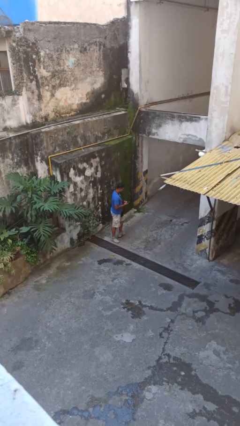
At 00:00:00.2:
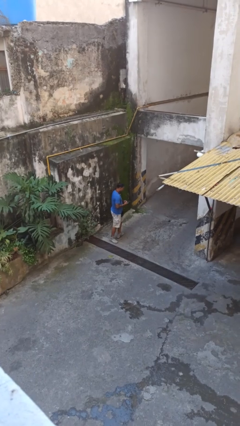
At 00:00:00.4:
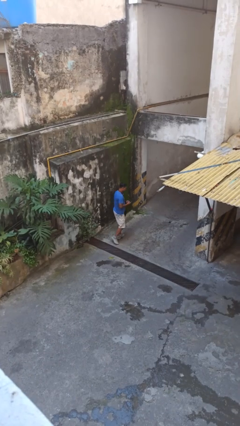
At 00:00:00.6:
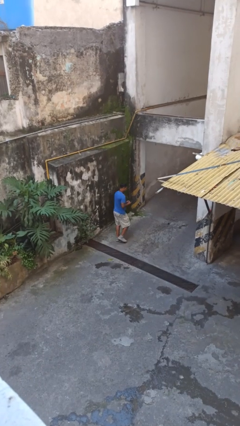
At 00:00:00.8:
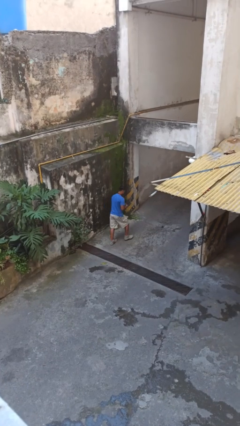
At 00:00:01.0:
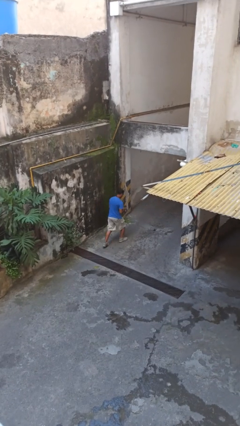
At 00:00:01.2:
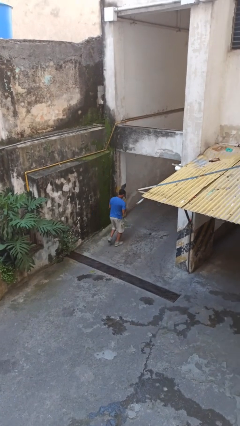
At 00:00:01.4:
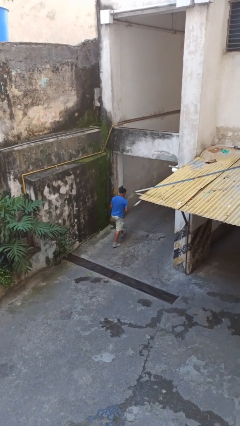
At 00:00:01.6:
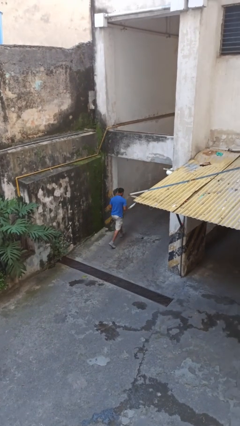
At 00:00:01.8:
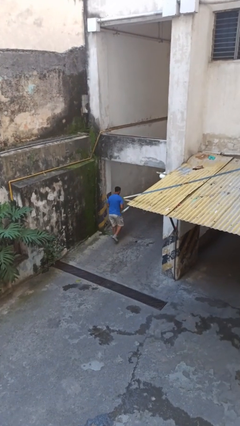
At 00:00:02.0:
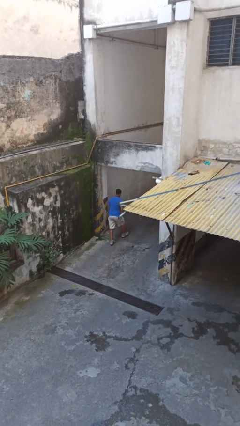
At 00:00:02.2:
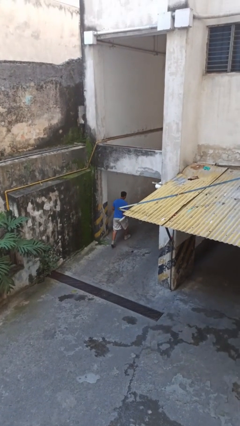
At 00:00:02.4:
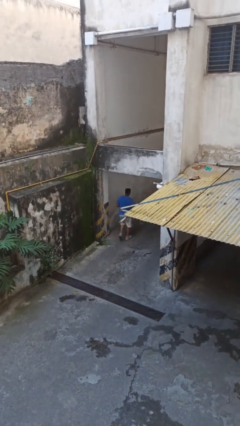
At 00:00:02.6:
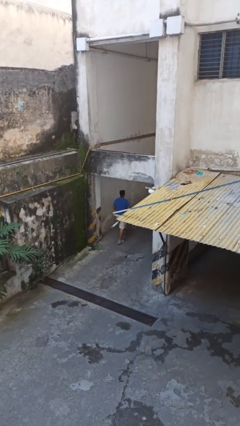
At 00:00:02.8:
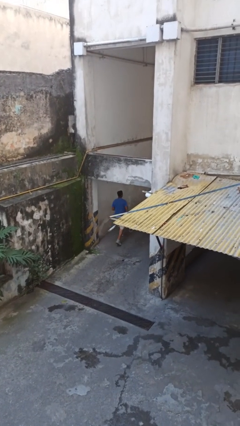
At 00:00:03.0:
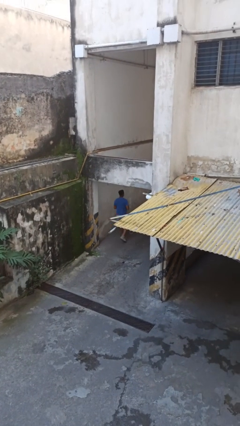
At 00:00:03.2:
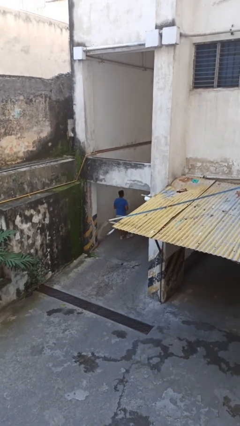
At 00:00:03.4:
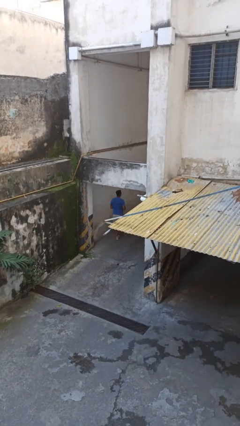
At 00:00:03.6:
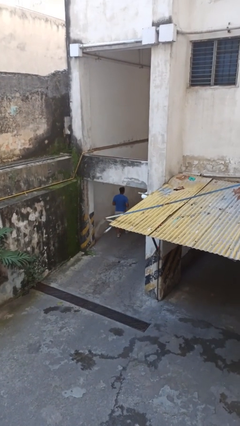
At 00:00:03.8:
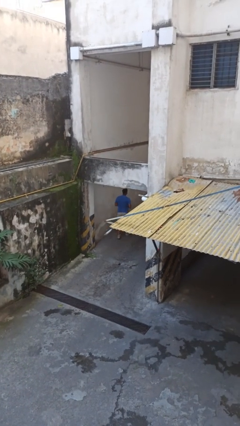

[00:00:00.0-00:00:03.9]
person exits scene through structure

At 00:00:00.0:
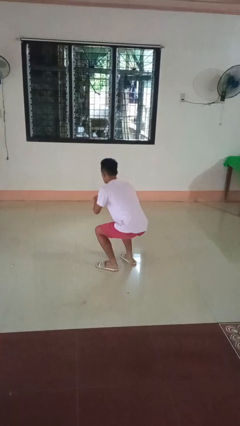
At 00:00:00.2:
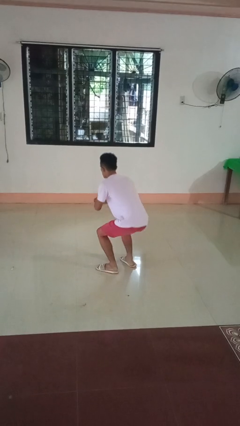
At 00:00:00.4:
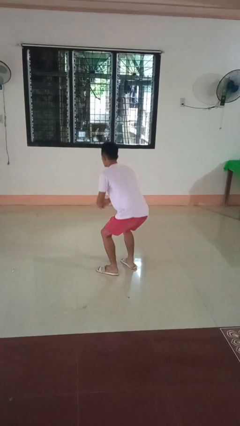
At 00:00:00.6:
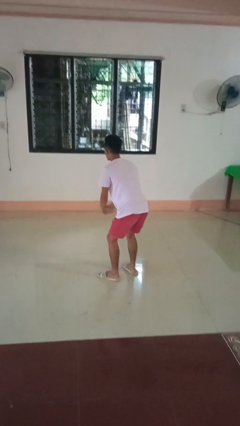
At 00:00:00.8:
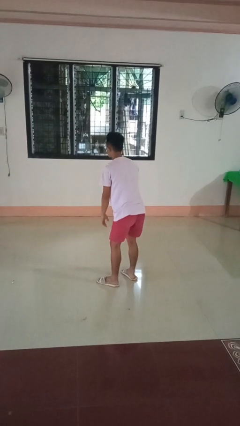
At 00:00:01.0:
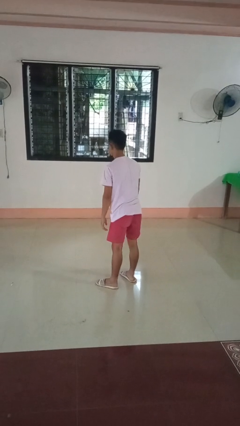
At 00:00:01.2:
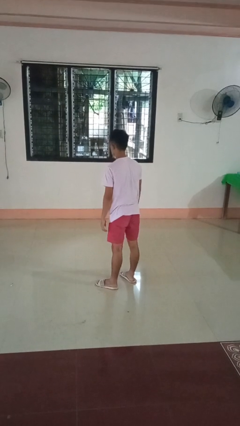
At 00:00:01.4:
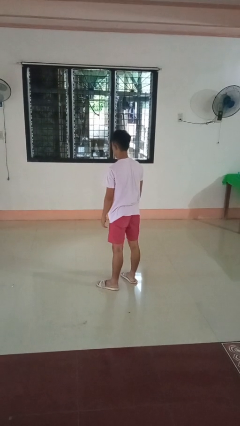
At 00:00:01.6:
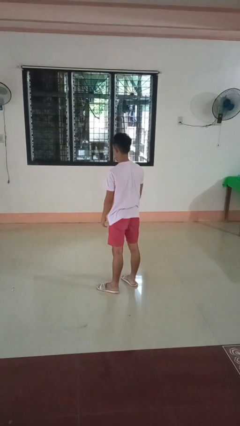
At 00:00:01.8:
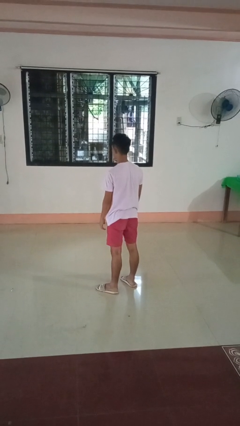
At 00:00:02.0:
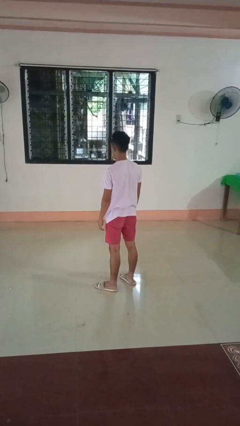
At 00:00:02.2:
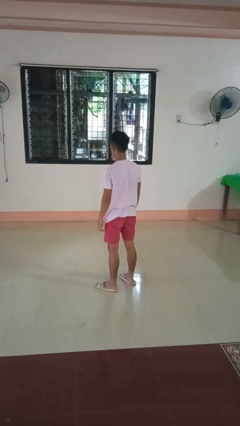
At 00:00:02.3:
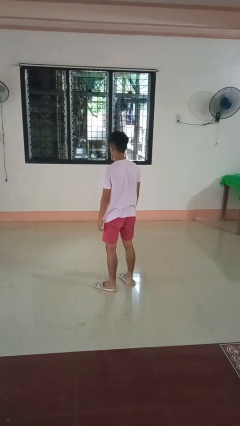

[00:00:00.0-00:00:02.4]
person stands up

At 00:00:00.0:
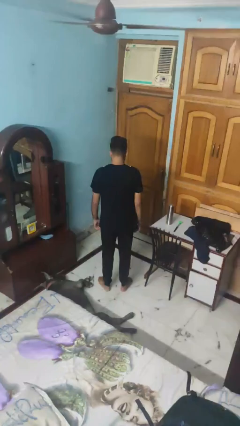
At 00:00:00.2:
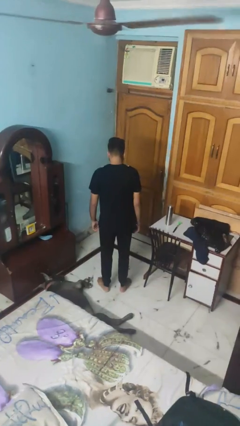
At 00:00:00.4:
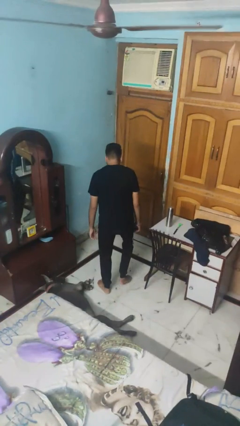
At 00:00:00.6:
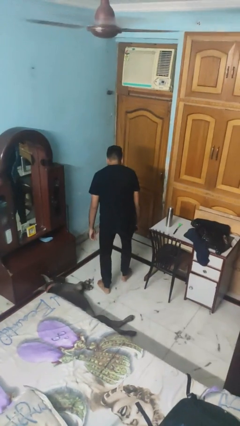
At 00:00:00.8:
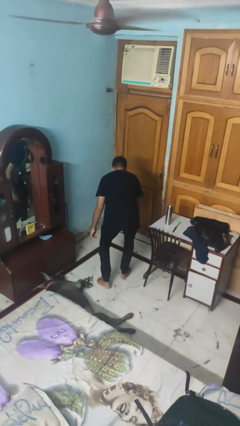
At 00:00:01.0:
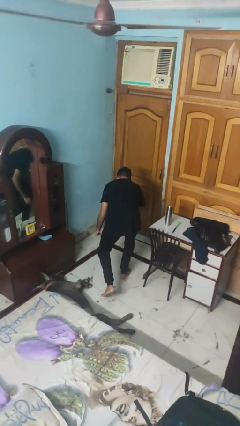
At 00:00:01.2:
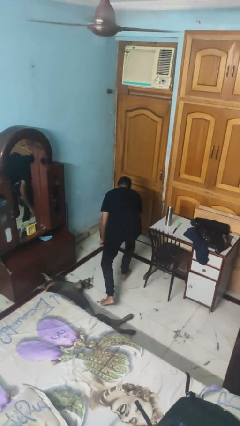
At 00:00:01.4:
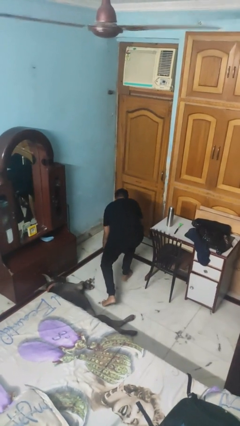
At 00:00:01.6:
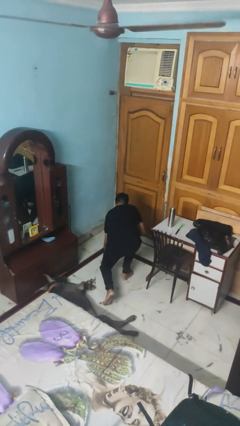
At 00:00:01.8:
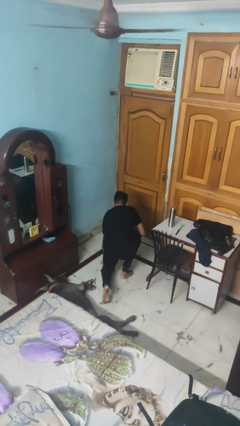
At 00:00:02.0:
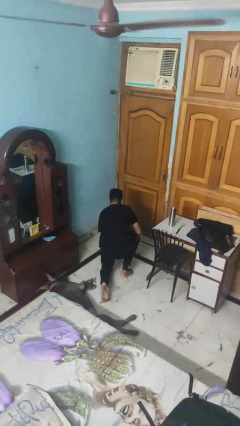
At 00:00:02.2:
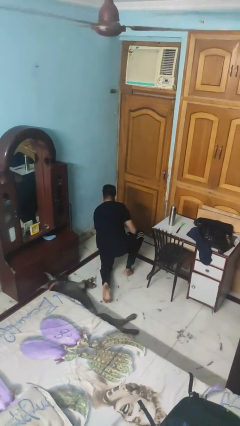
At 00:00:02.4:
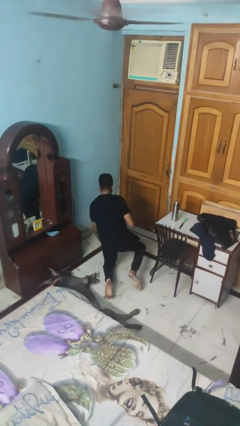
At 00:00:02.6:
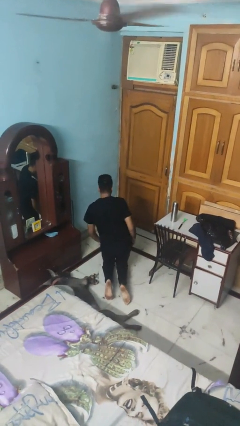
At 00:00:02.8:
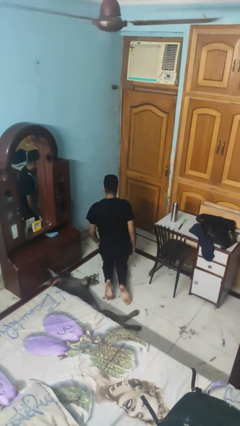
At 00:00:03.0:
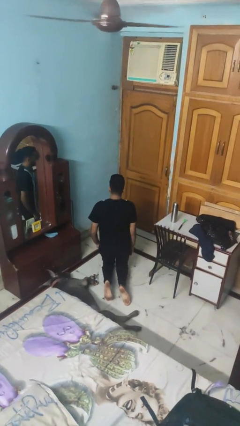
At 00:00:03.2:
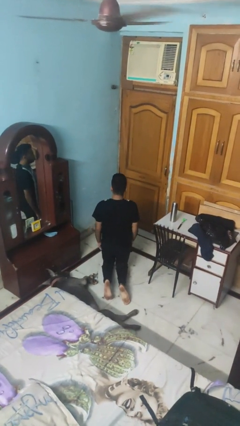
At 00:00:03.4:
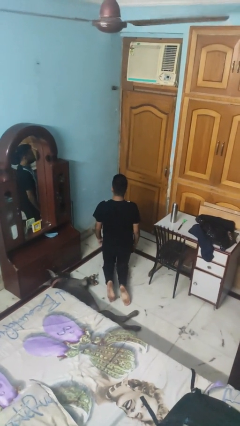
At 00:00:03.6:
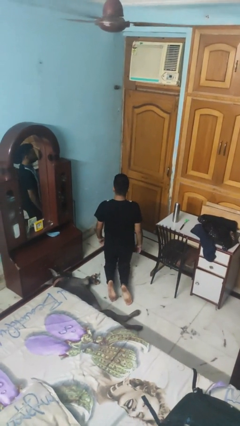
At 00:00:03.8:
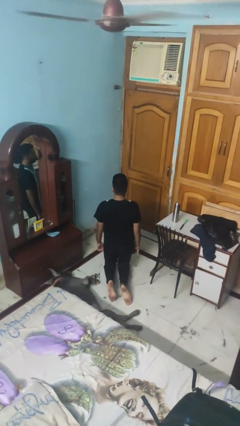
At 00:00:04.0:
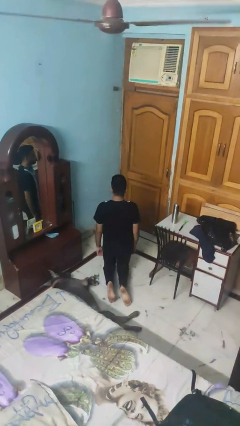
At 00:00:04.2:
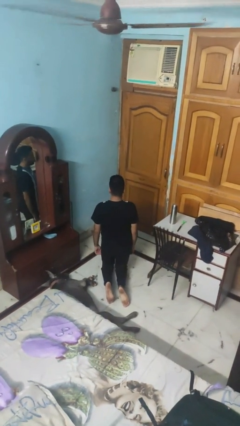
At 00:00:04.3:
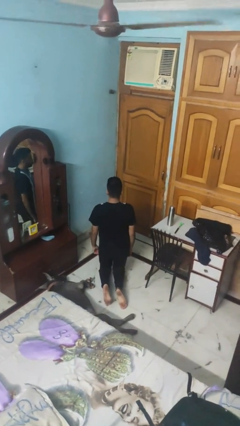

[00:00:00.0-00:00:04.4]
person kneels

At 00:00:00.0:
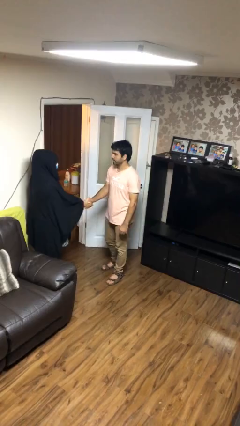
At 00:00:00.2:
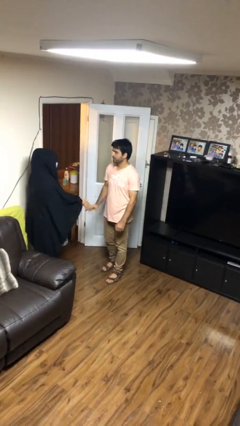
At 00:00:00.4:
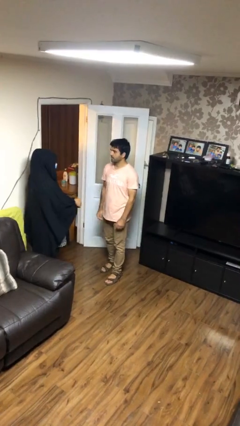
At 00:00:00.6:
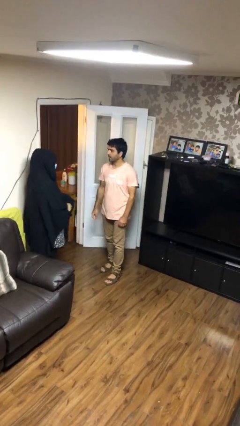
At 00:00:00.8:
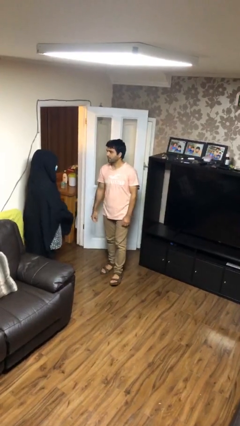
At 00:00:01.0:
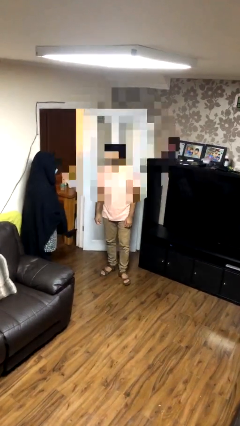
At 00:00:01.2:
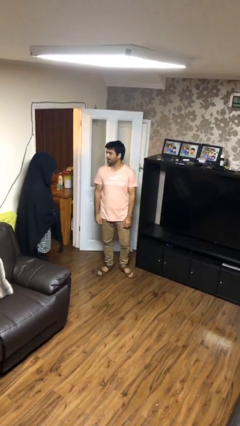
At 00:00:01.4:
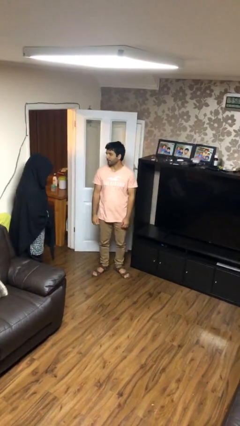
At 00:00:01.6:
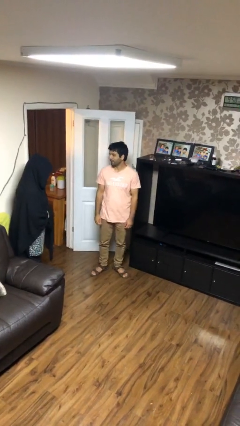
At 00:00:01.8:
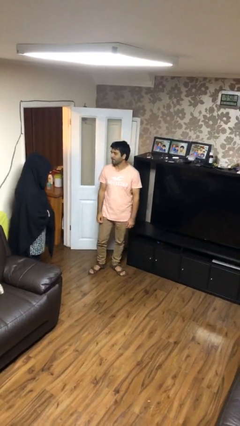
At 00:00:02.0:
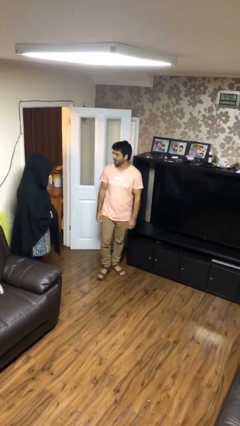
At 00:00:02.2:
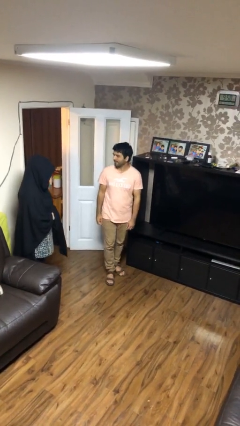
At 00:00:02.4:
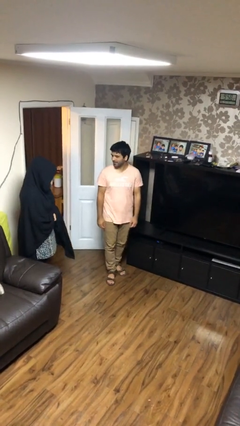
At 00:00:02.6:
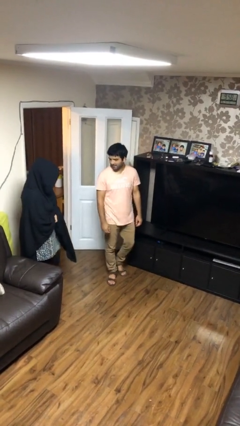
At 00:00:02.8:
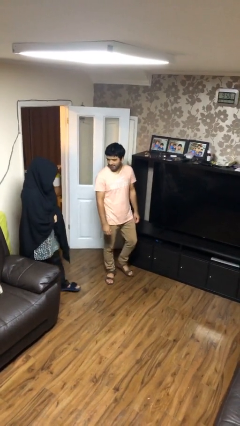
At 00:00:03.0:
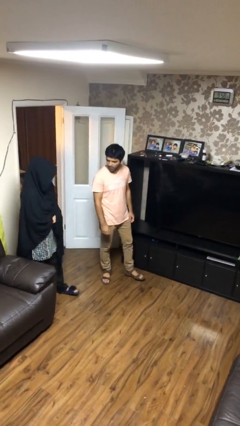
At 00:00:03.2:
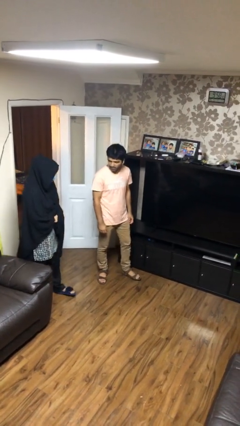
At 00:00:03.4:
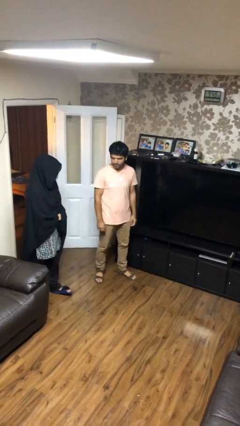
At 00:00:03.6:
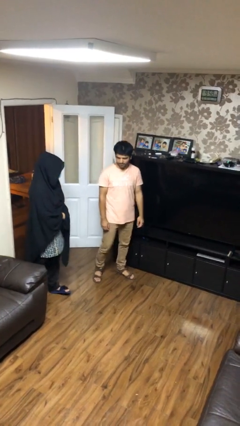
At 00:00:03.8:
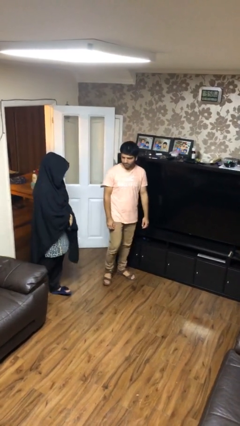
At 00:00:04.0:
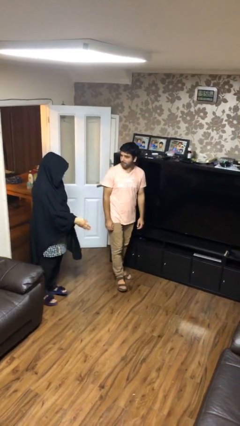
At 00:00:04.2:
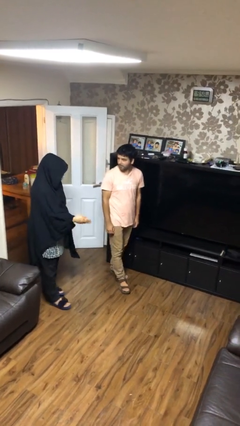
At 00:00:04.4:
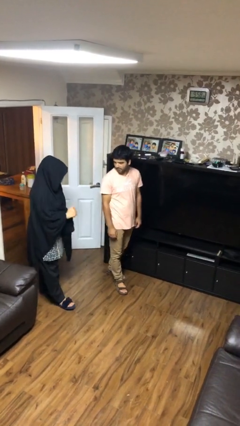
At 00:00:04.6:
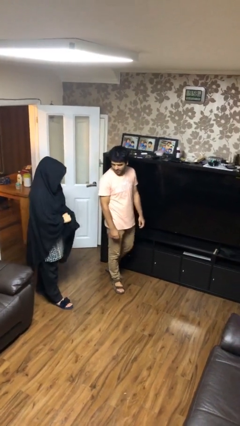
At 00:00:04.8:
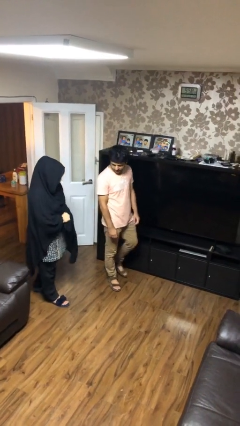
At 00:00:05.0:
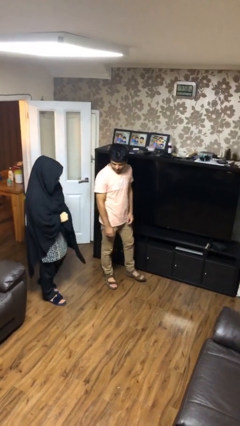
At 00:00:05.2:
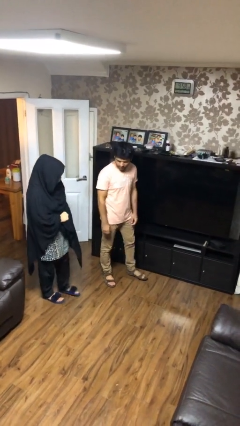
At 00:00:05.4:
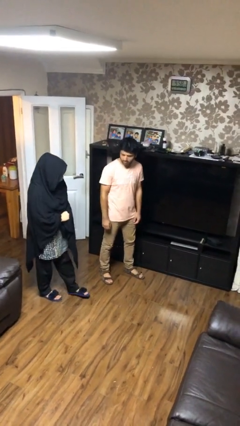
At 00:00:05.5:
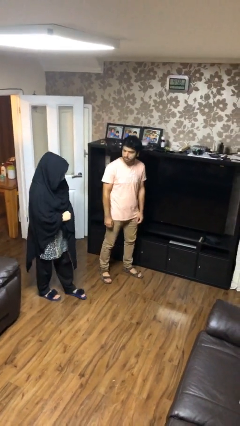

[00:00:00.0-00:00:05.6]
person talks to person

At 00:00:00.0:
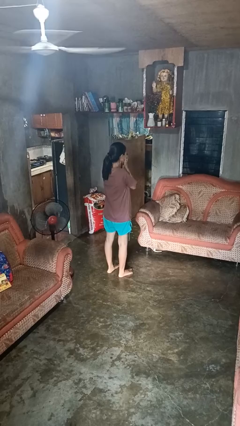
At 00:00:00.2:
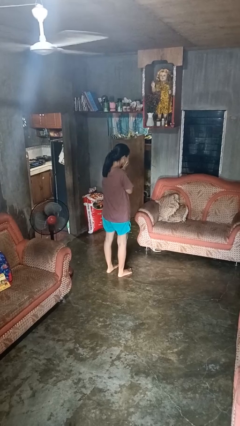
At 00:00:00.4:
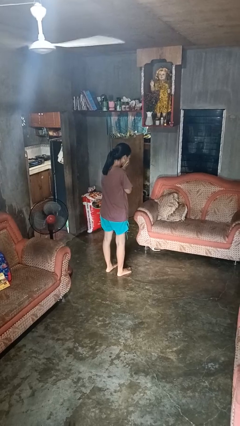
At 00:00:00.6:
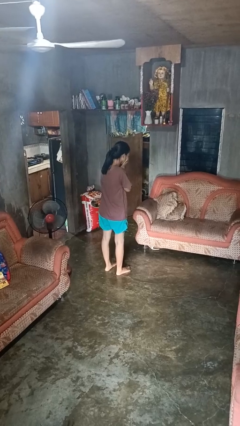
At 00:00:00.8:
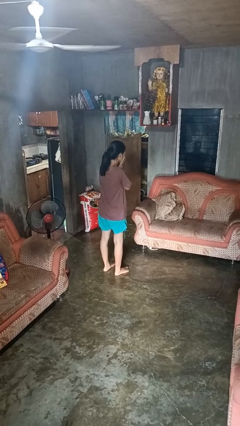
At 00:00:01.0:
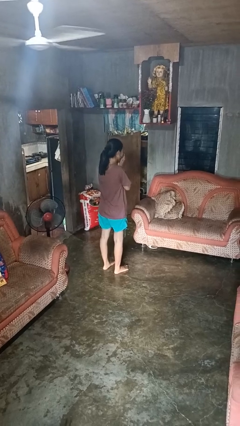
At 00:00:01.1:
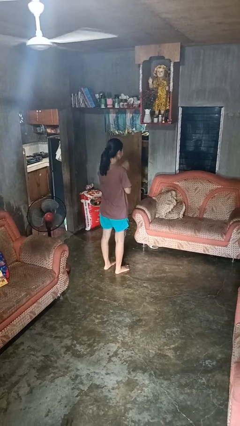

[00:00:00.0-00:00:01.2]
person sneezes into hand
